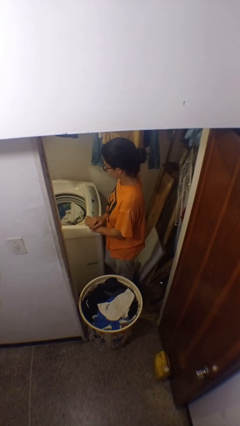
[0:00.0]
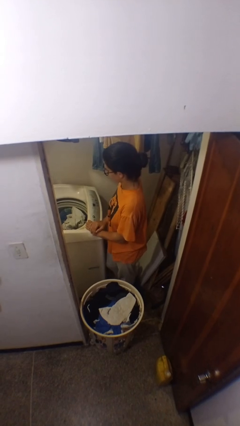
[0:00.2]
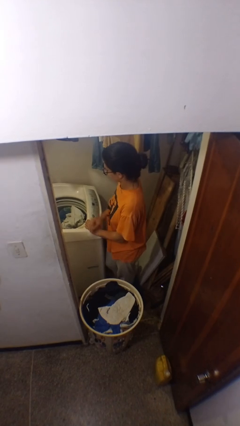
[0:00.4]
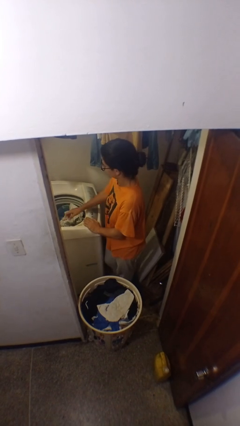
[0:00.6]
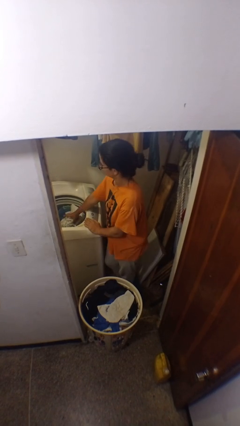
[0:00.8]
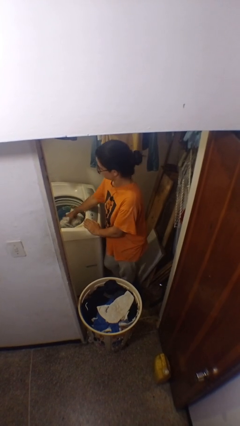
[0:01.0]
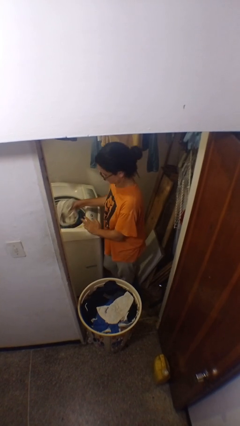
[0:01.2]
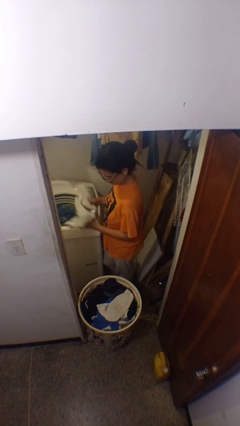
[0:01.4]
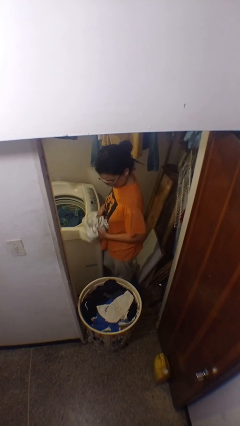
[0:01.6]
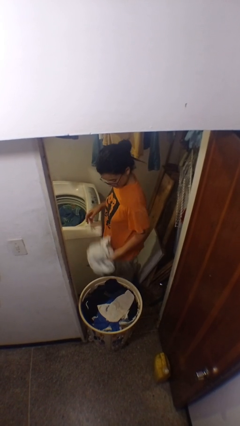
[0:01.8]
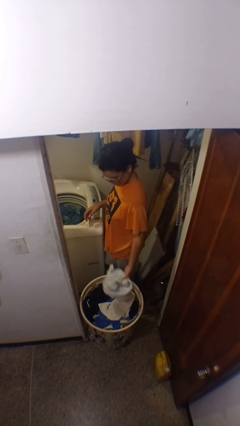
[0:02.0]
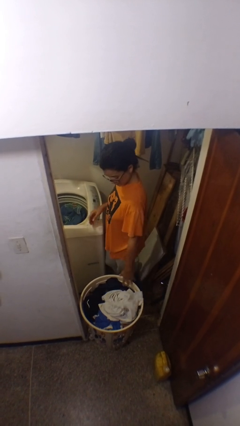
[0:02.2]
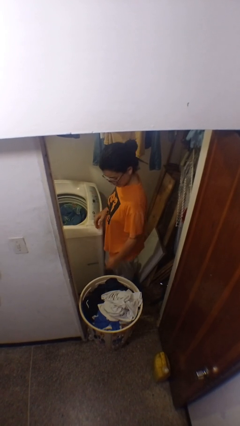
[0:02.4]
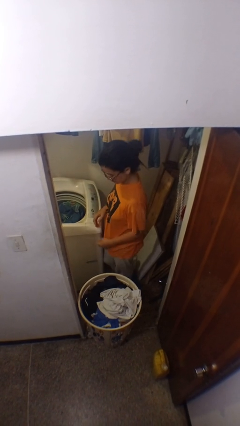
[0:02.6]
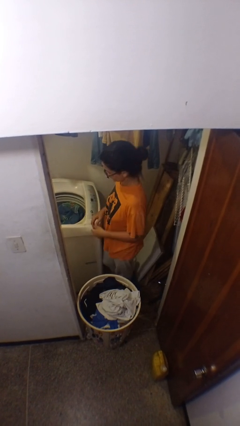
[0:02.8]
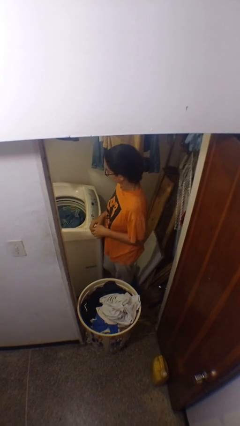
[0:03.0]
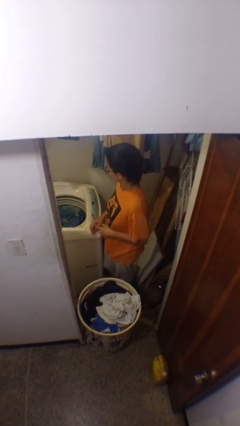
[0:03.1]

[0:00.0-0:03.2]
person unloads clotheswasher

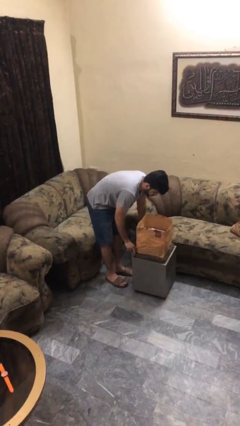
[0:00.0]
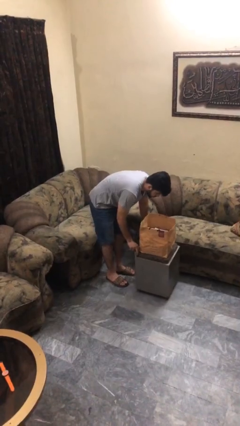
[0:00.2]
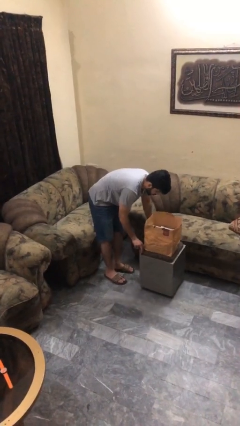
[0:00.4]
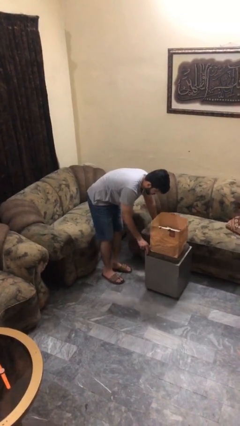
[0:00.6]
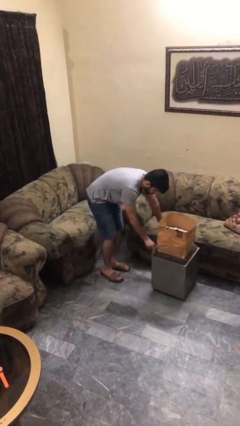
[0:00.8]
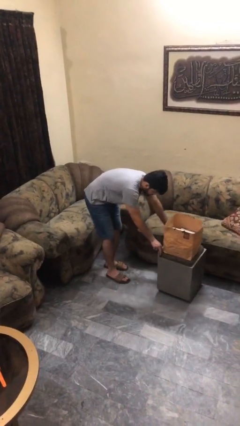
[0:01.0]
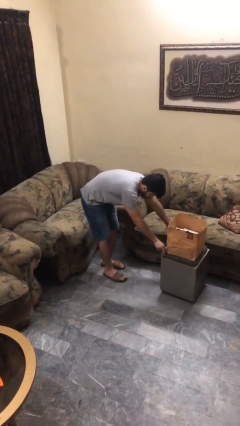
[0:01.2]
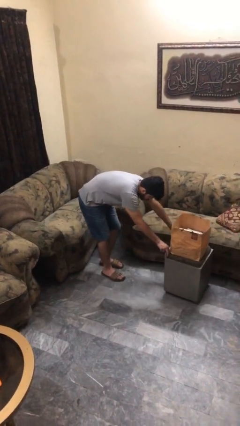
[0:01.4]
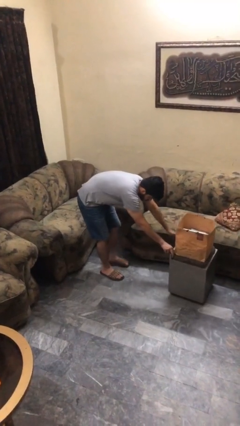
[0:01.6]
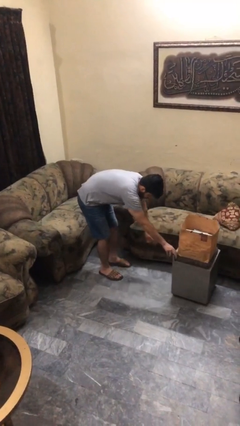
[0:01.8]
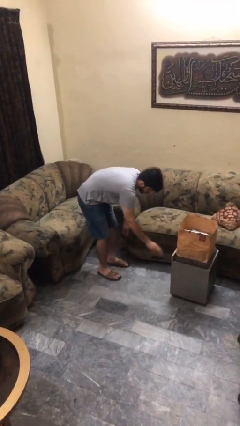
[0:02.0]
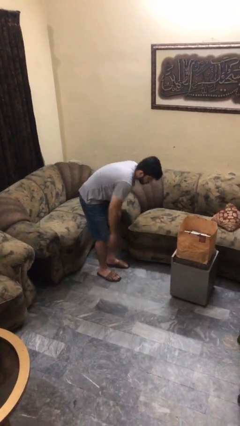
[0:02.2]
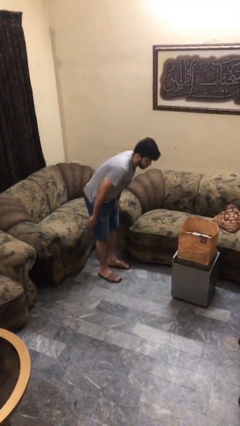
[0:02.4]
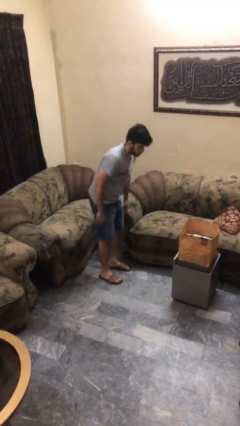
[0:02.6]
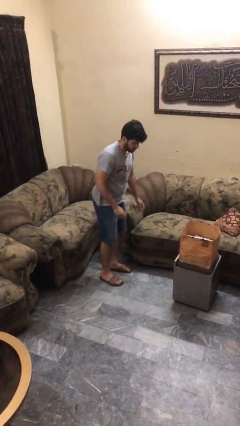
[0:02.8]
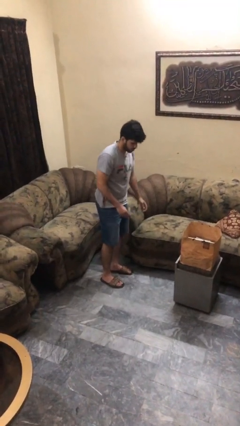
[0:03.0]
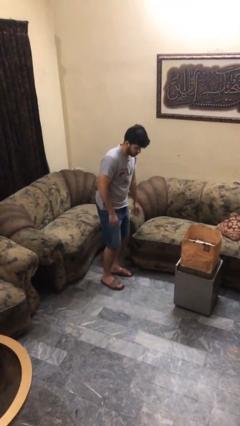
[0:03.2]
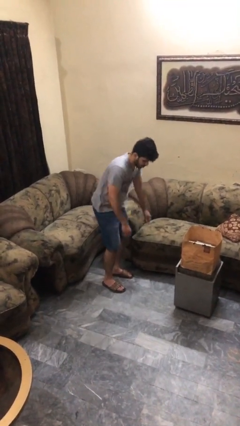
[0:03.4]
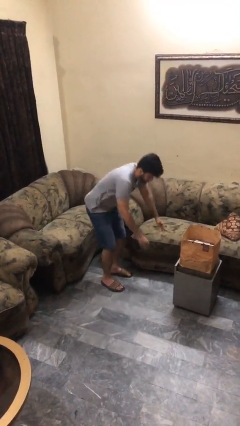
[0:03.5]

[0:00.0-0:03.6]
person pushes wheeled cart

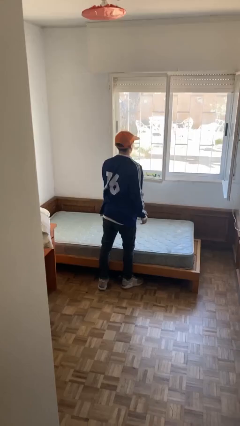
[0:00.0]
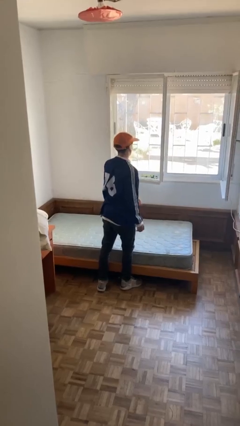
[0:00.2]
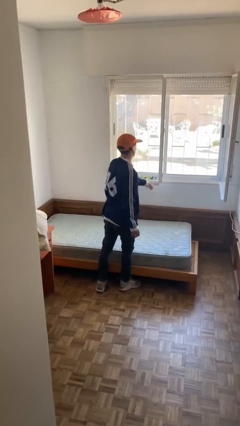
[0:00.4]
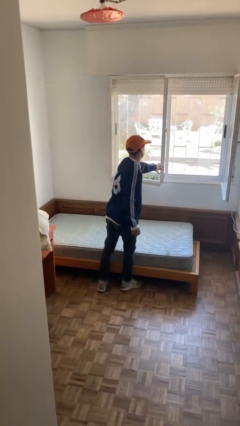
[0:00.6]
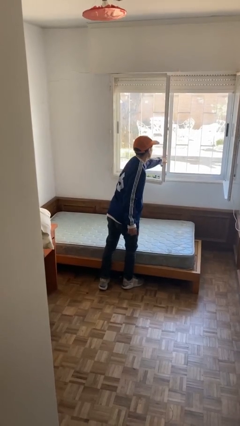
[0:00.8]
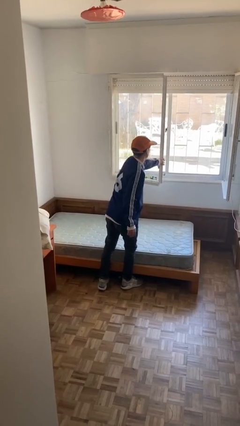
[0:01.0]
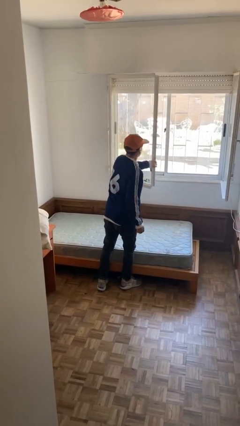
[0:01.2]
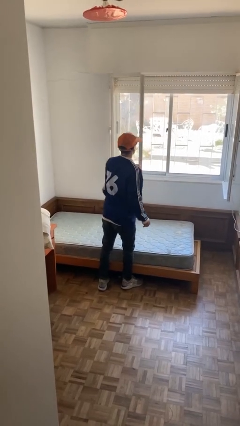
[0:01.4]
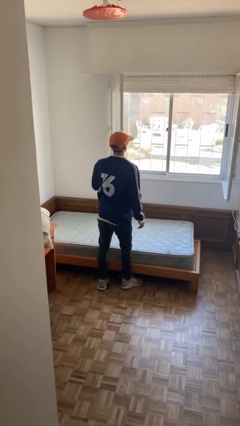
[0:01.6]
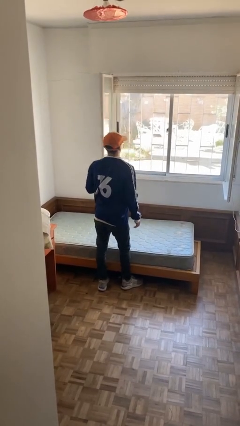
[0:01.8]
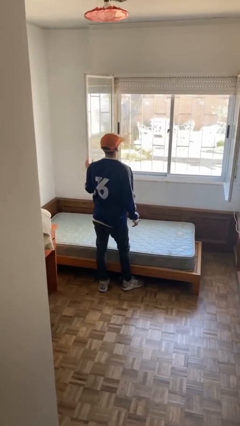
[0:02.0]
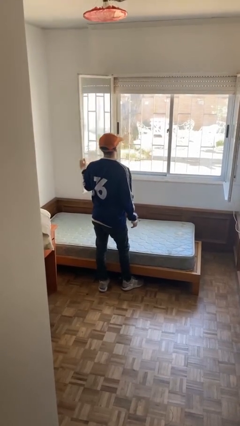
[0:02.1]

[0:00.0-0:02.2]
person opens home window

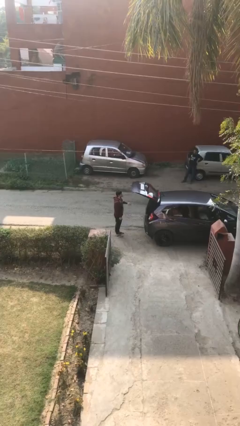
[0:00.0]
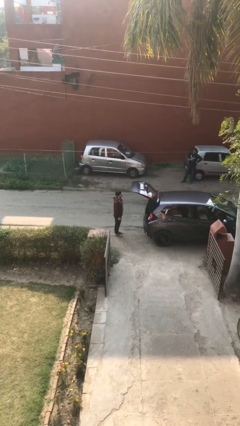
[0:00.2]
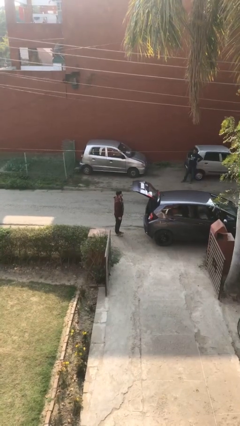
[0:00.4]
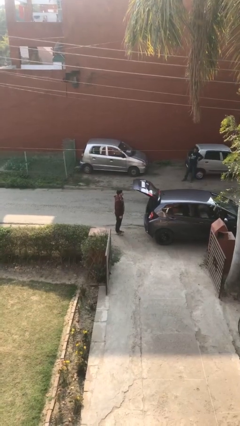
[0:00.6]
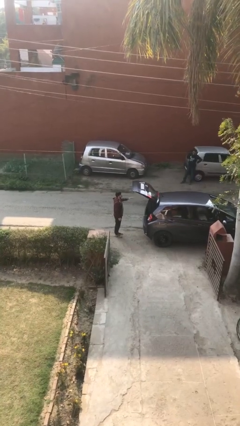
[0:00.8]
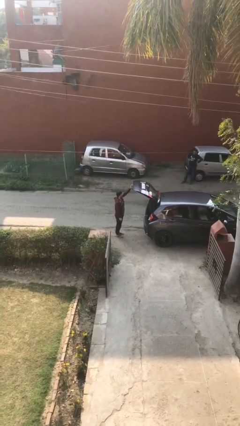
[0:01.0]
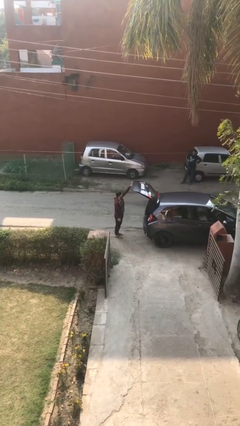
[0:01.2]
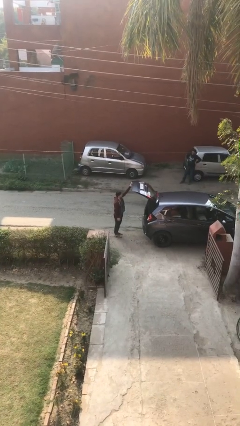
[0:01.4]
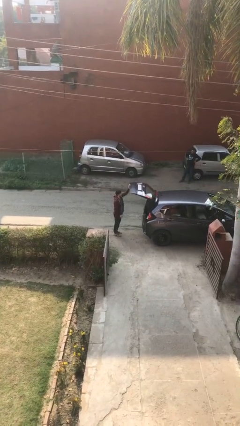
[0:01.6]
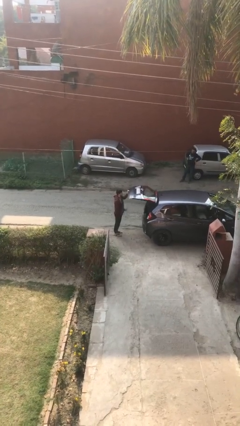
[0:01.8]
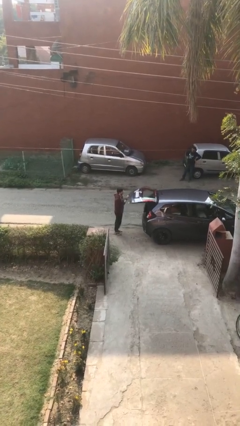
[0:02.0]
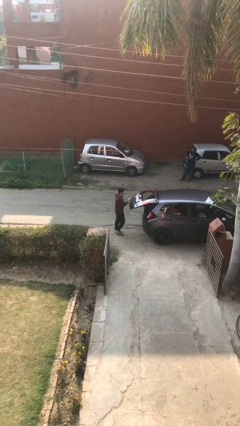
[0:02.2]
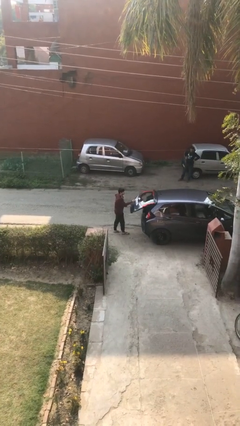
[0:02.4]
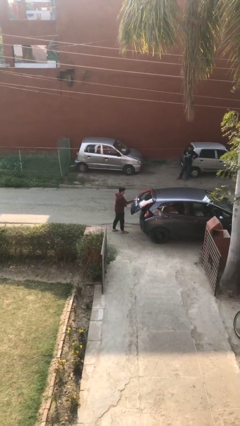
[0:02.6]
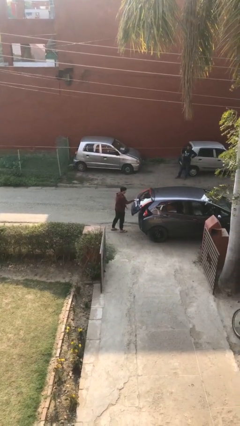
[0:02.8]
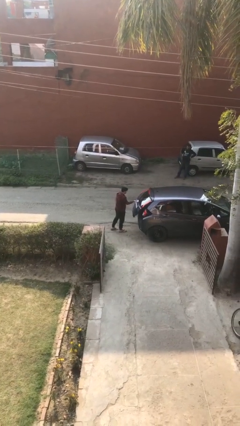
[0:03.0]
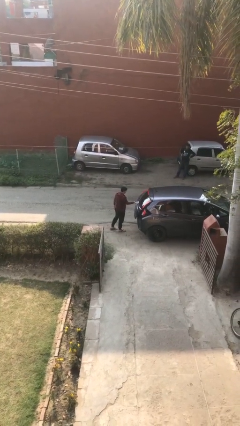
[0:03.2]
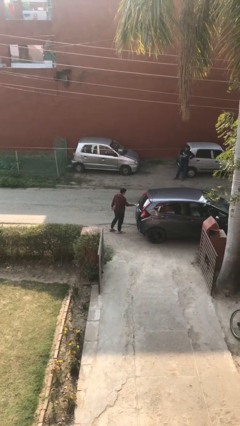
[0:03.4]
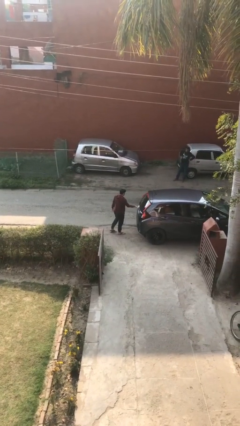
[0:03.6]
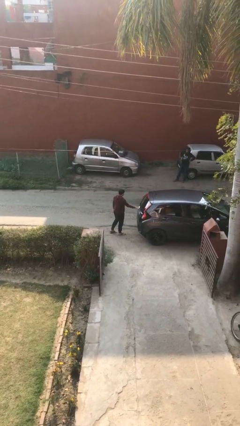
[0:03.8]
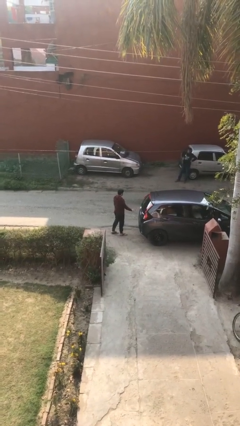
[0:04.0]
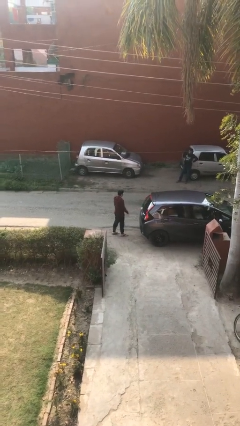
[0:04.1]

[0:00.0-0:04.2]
person closes car trunk

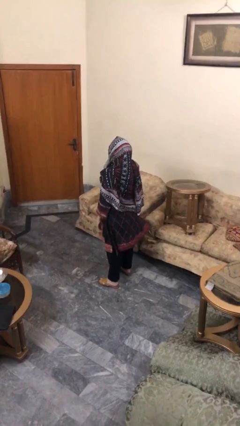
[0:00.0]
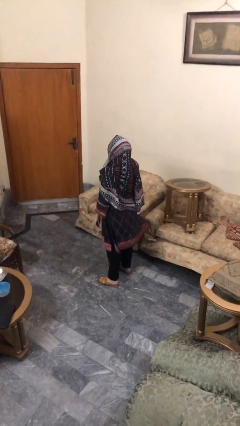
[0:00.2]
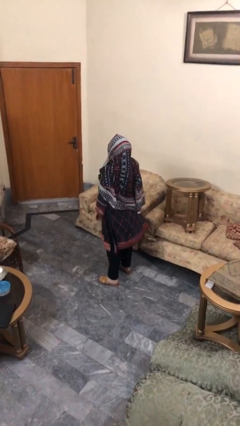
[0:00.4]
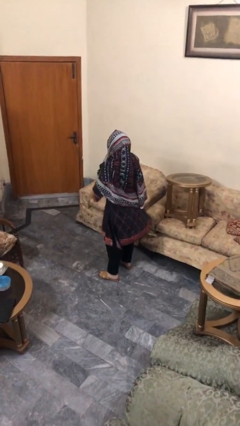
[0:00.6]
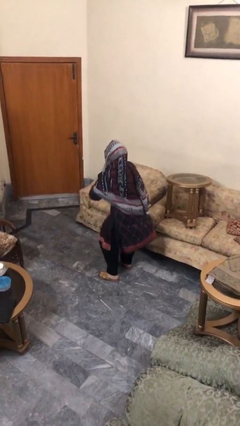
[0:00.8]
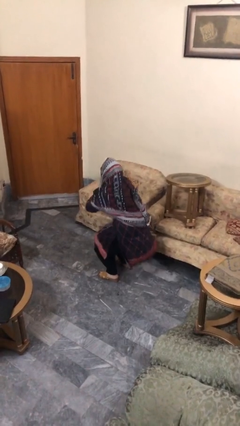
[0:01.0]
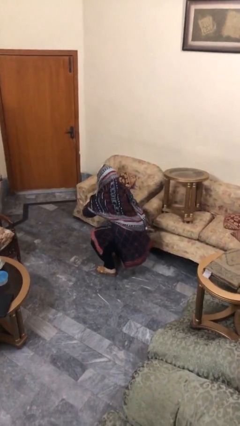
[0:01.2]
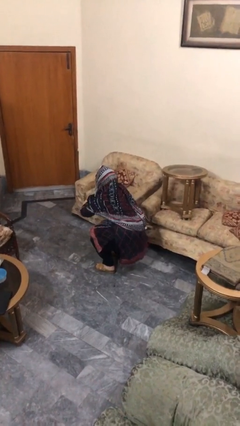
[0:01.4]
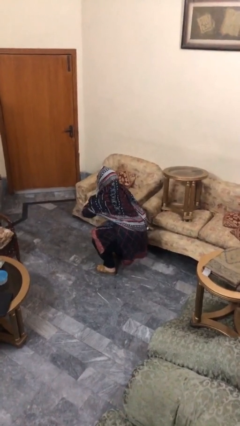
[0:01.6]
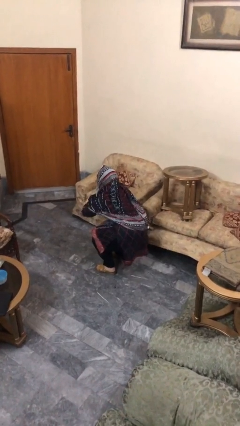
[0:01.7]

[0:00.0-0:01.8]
person squats

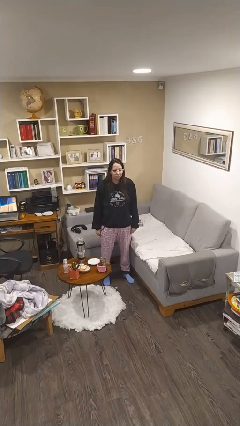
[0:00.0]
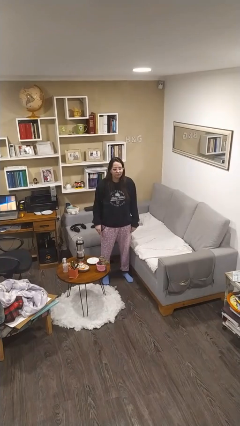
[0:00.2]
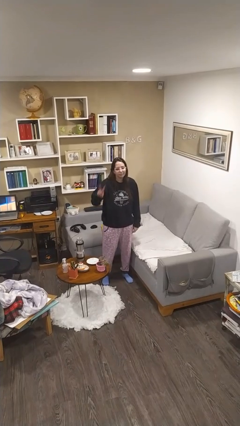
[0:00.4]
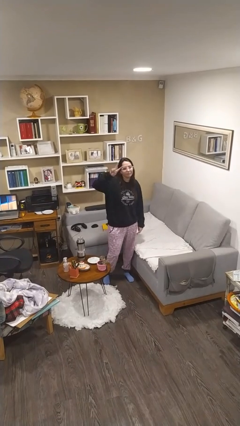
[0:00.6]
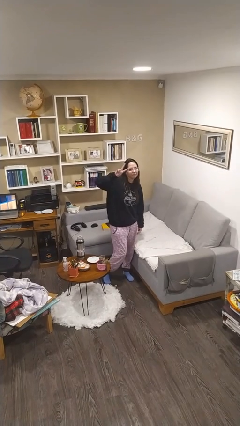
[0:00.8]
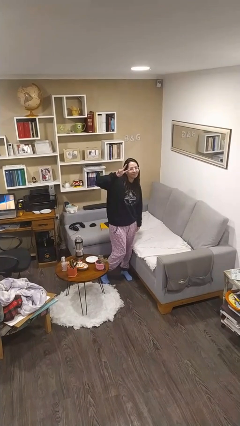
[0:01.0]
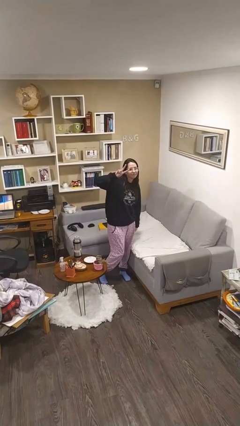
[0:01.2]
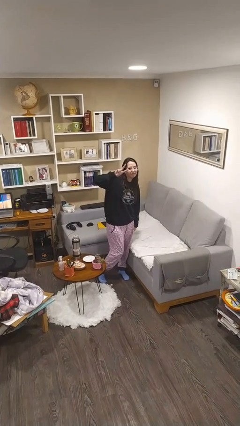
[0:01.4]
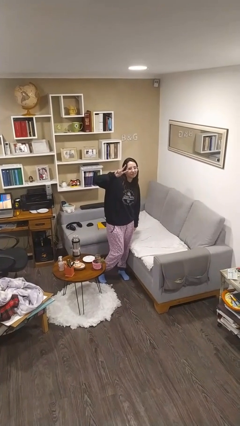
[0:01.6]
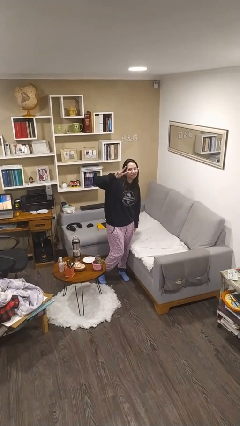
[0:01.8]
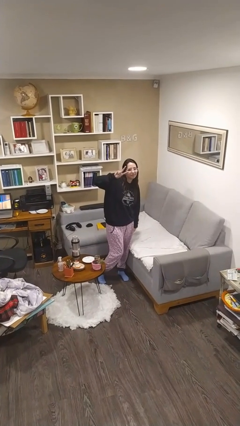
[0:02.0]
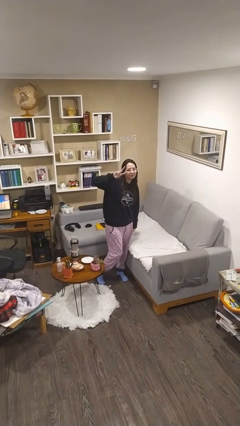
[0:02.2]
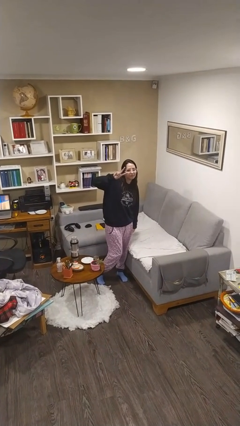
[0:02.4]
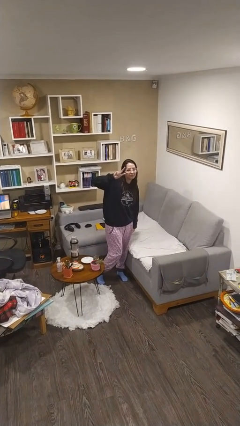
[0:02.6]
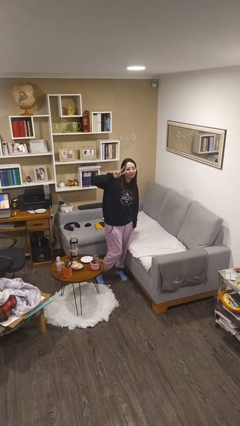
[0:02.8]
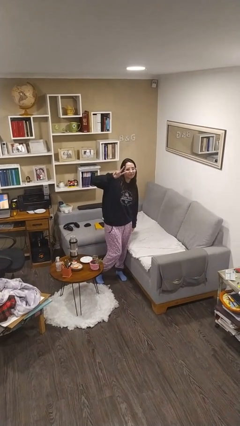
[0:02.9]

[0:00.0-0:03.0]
person gestures peace
